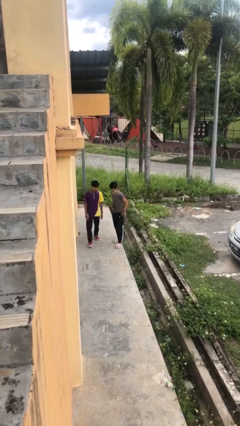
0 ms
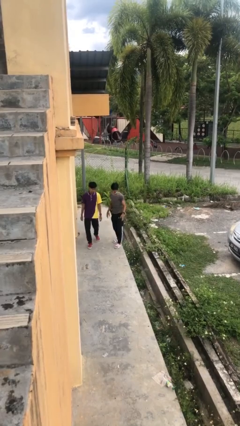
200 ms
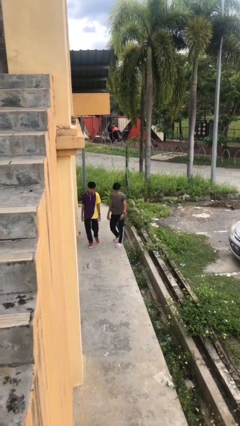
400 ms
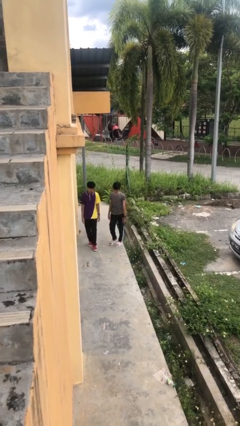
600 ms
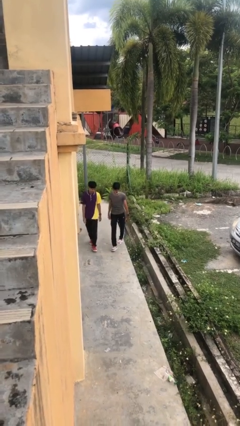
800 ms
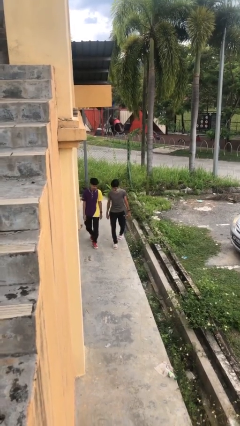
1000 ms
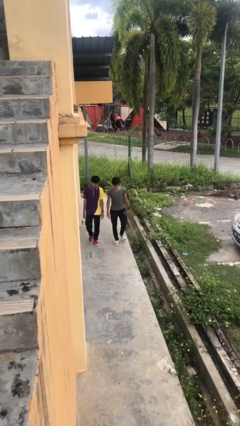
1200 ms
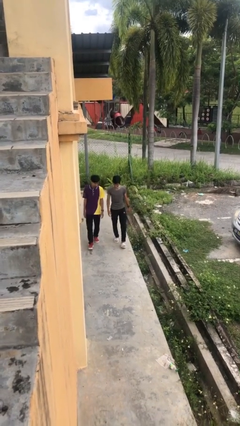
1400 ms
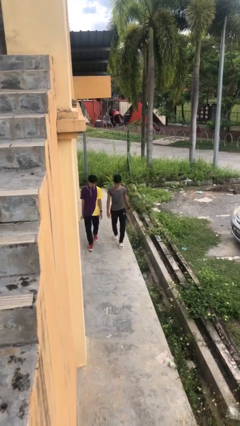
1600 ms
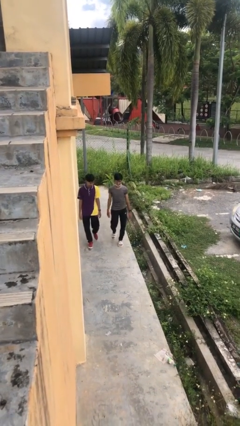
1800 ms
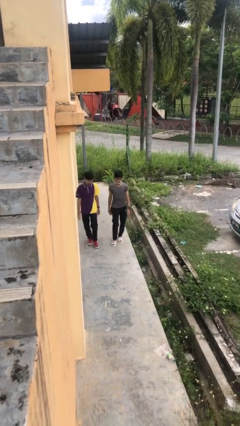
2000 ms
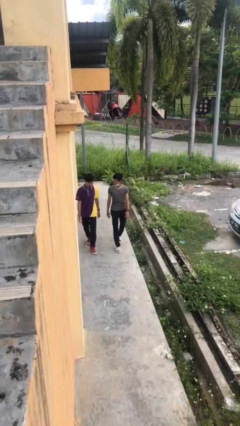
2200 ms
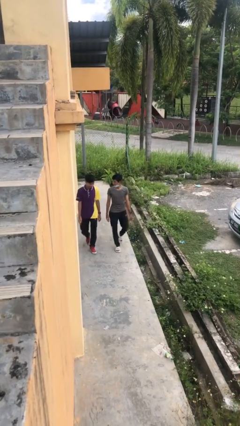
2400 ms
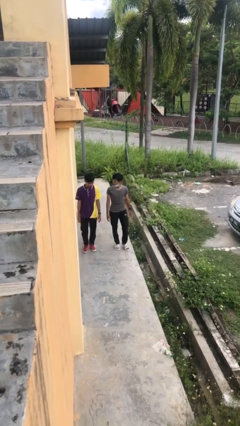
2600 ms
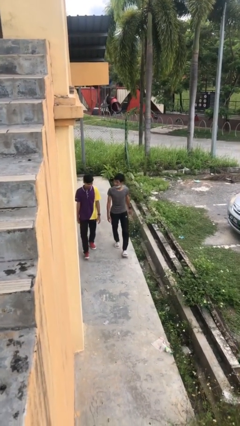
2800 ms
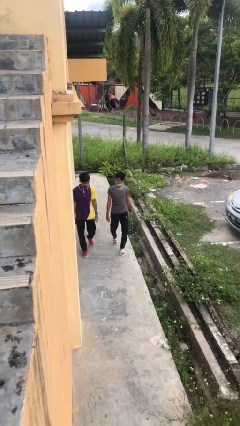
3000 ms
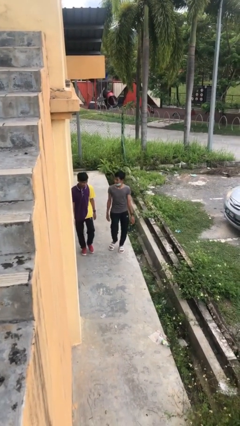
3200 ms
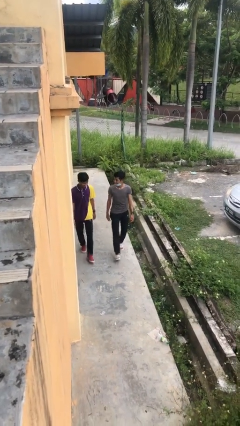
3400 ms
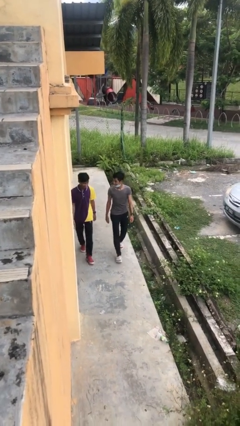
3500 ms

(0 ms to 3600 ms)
person talks to person

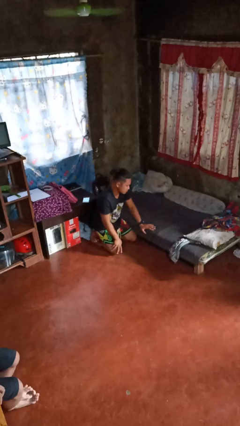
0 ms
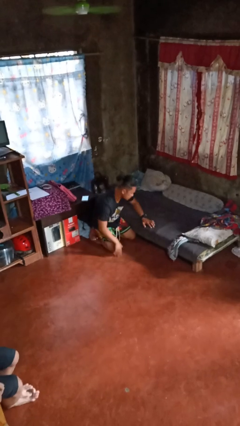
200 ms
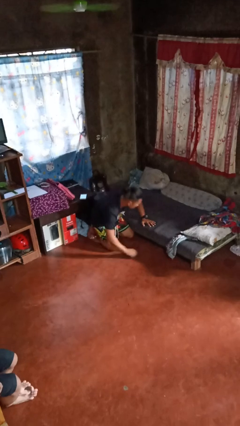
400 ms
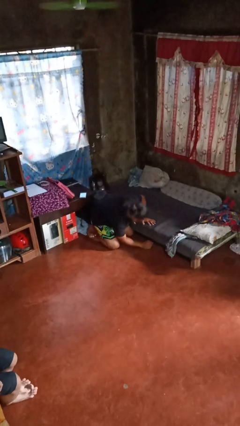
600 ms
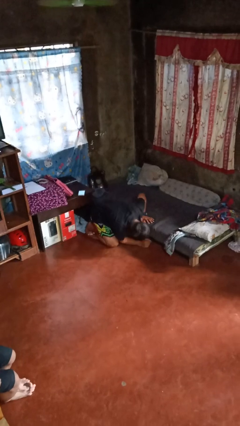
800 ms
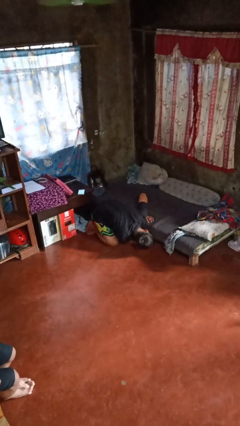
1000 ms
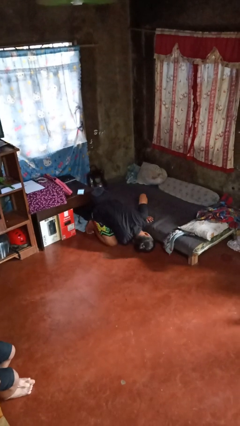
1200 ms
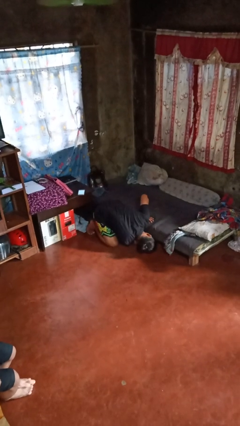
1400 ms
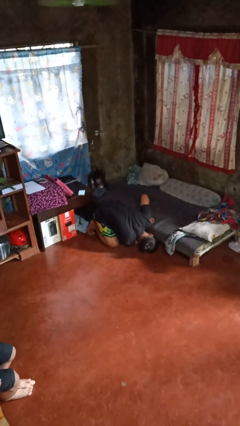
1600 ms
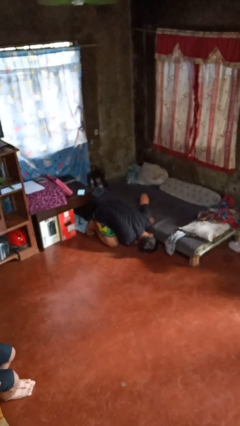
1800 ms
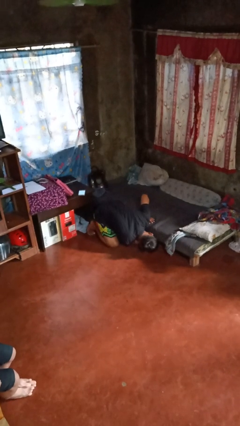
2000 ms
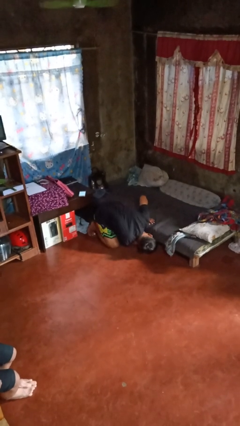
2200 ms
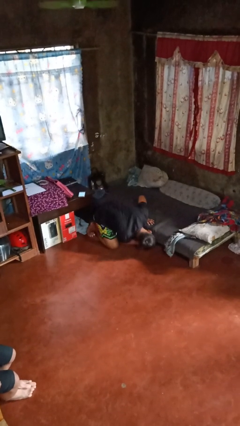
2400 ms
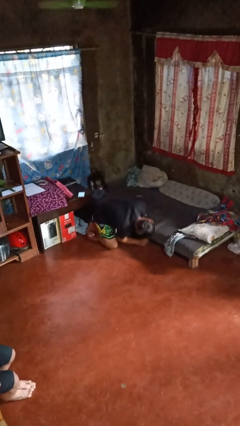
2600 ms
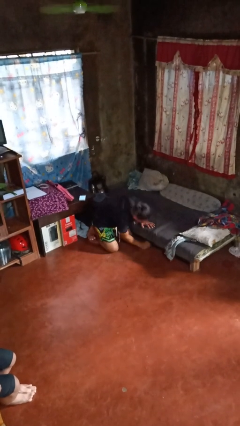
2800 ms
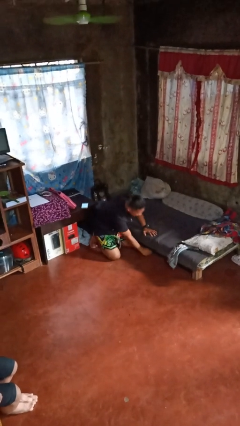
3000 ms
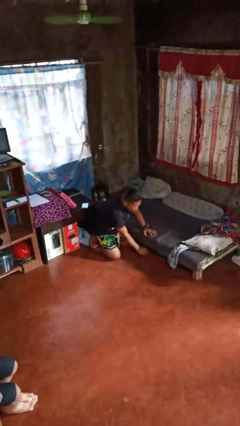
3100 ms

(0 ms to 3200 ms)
person searches under bed

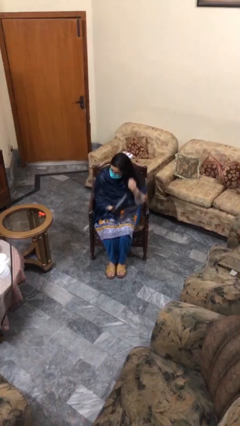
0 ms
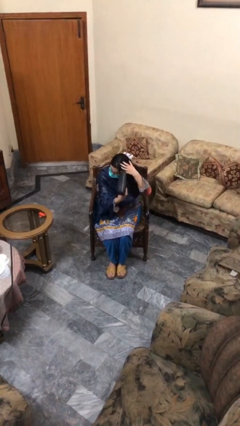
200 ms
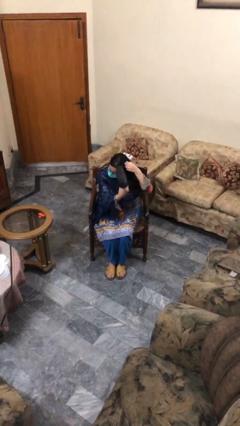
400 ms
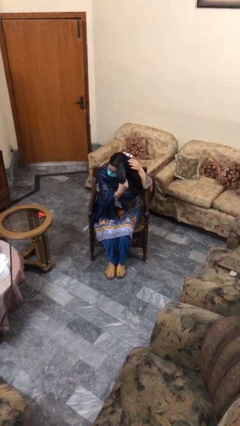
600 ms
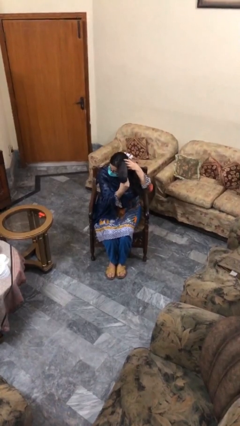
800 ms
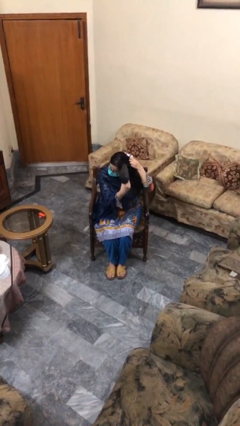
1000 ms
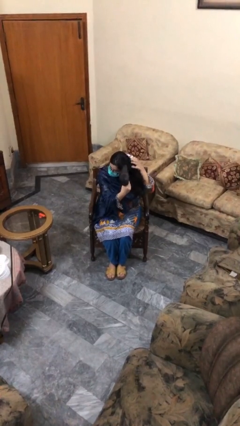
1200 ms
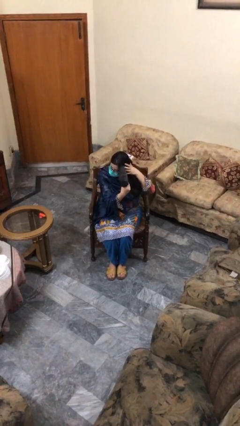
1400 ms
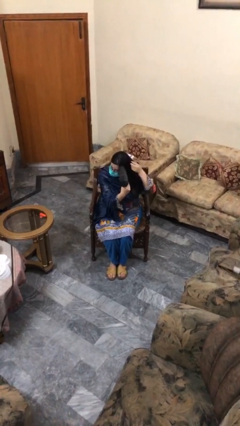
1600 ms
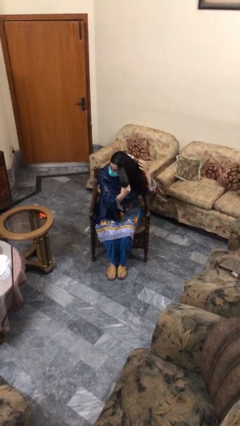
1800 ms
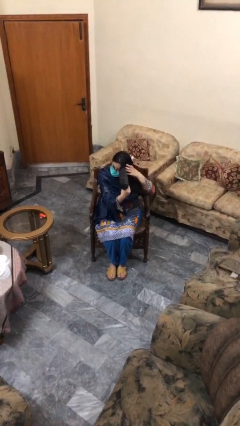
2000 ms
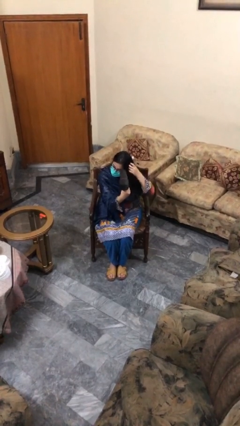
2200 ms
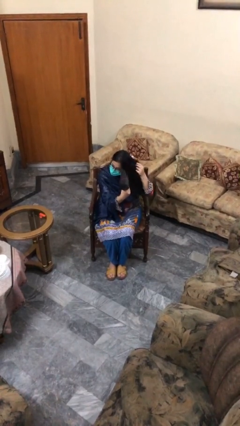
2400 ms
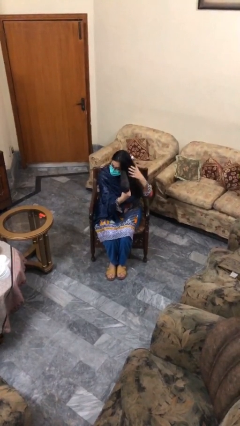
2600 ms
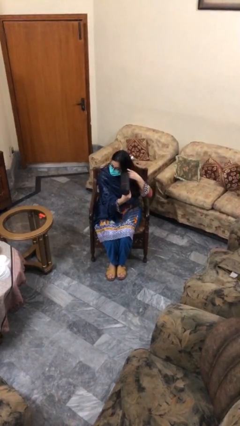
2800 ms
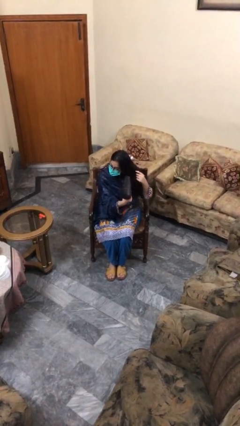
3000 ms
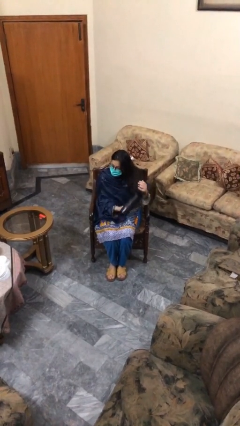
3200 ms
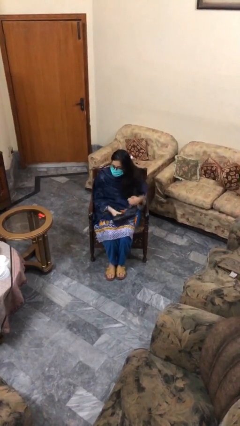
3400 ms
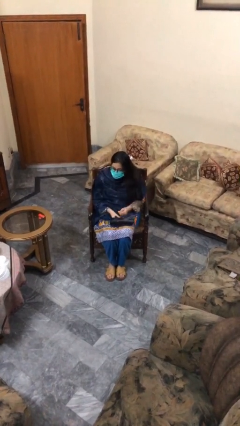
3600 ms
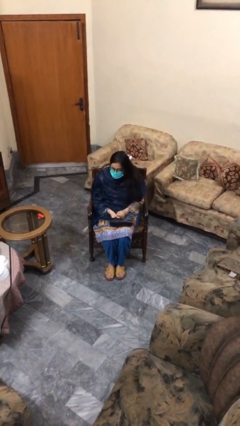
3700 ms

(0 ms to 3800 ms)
person dries hair with hairdryer

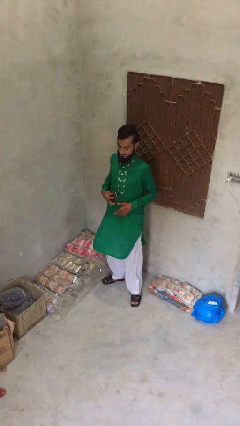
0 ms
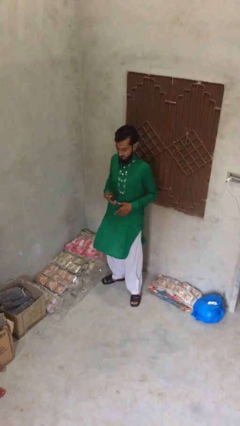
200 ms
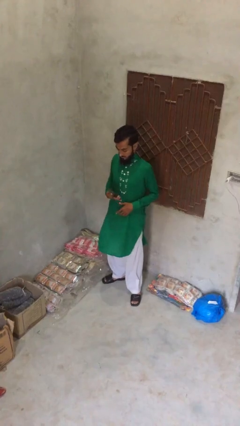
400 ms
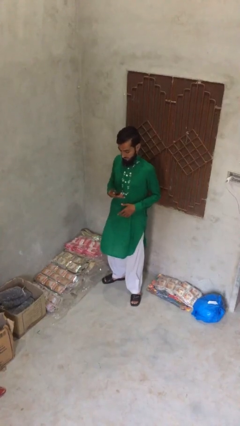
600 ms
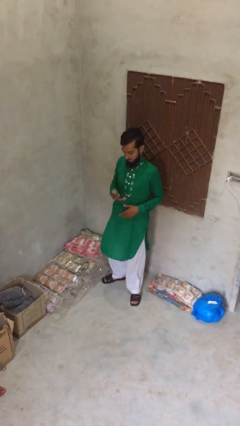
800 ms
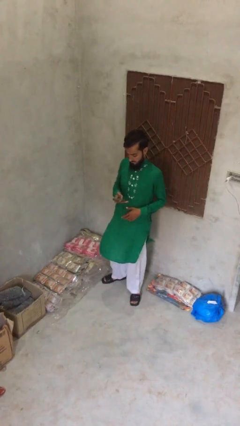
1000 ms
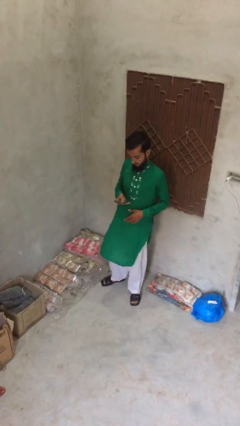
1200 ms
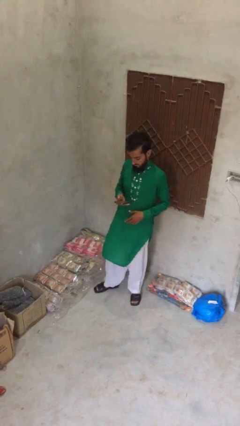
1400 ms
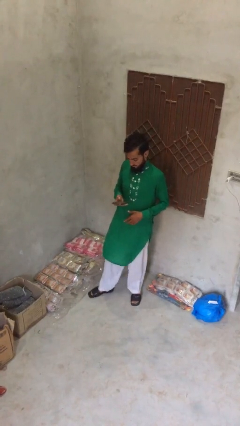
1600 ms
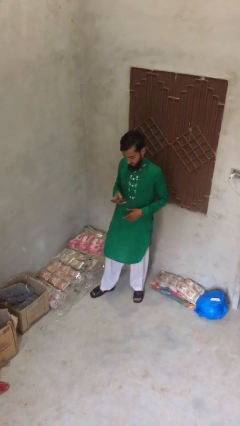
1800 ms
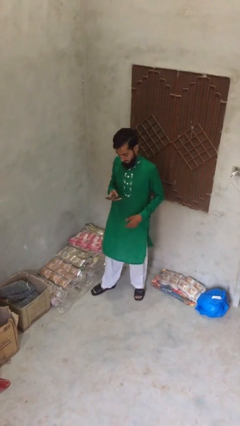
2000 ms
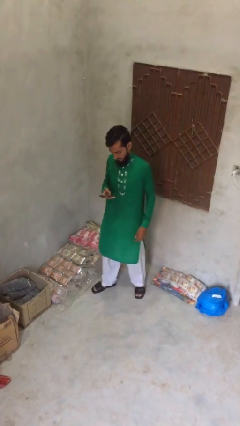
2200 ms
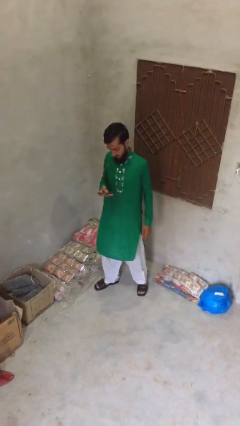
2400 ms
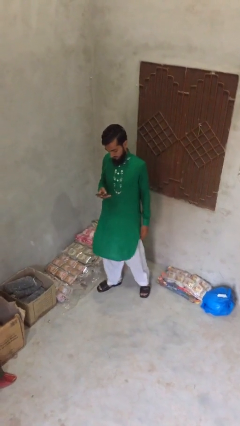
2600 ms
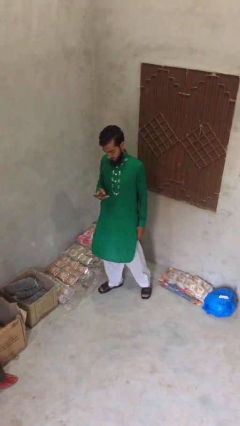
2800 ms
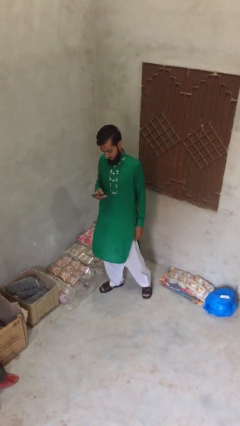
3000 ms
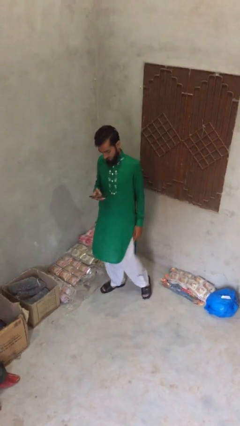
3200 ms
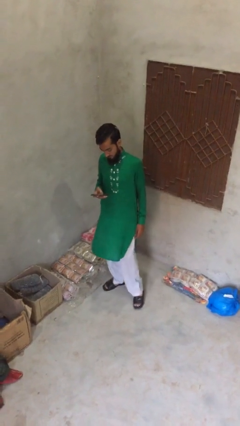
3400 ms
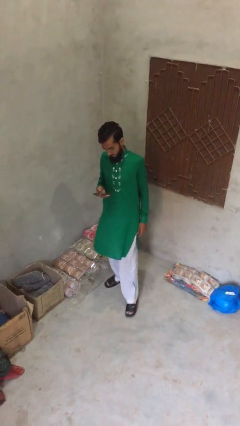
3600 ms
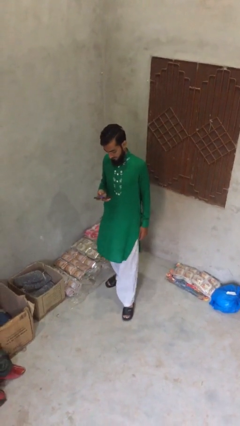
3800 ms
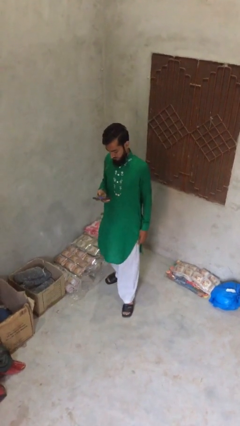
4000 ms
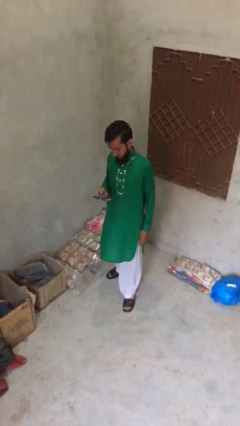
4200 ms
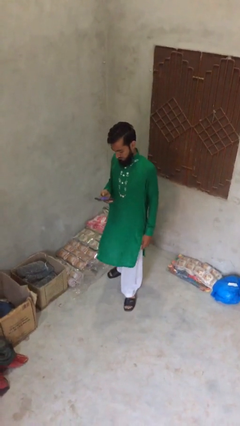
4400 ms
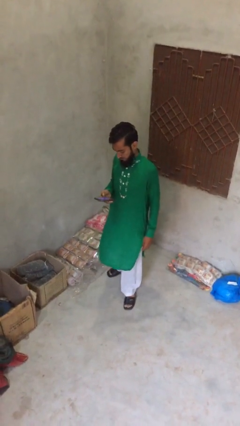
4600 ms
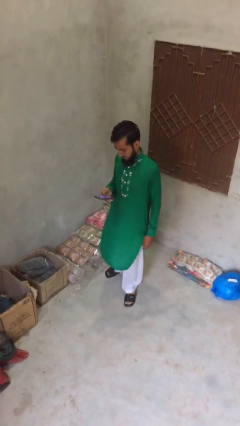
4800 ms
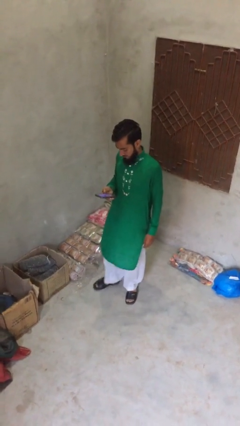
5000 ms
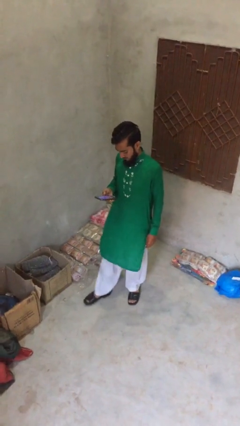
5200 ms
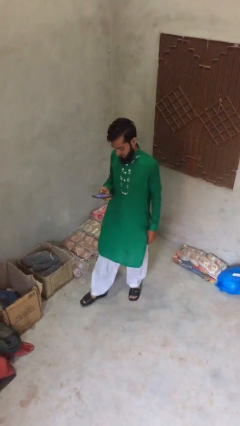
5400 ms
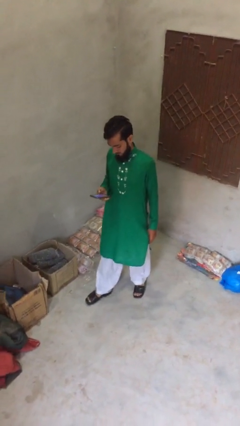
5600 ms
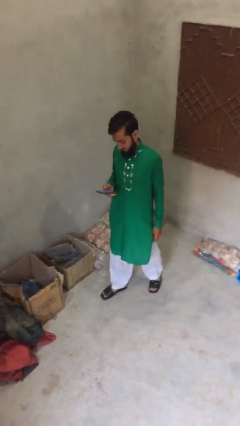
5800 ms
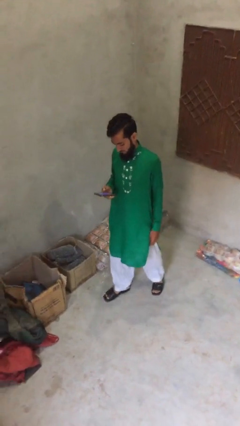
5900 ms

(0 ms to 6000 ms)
person texts on phone

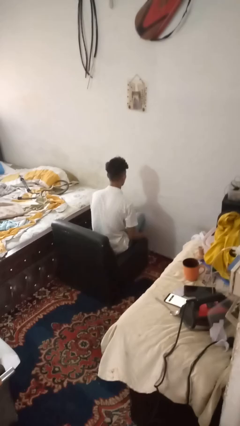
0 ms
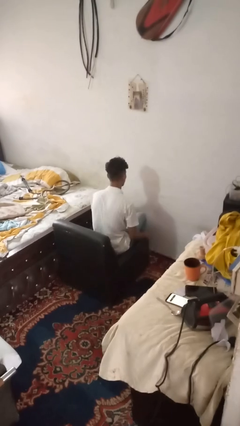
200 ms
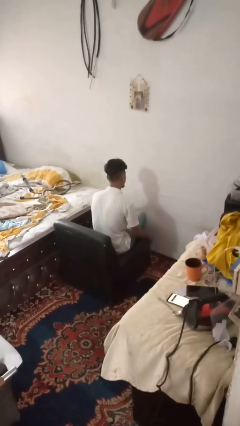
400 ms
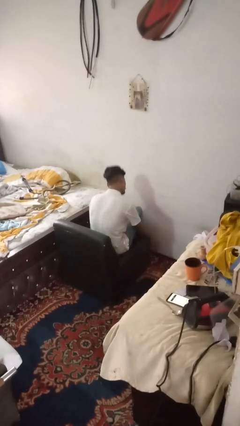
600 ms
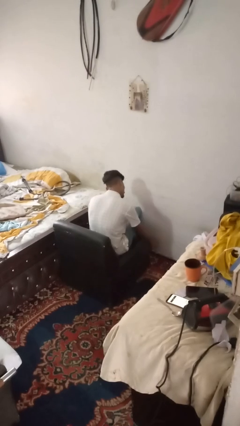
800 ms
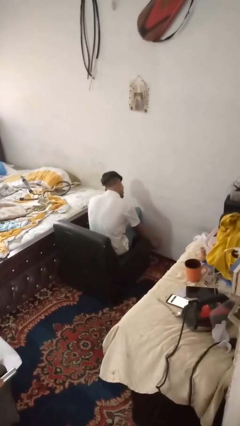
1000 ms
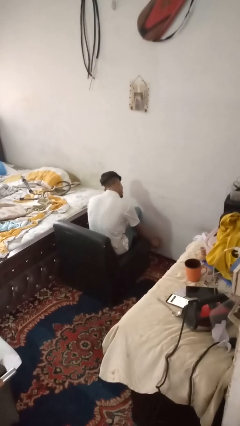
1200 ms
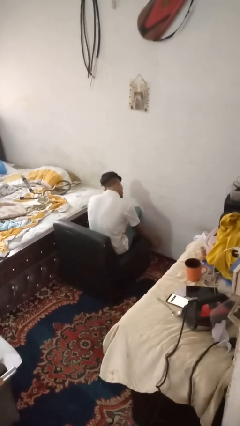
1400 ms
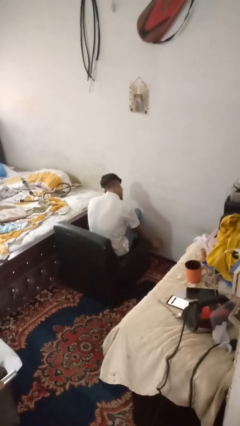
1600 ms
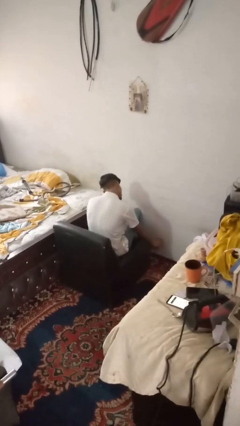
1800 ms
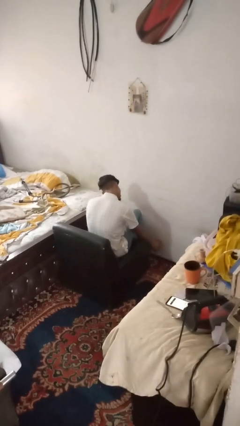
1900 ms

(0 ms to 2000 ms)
person rubs foot
